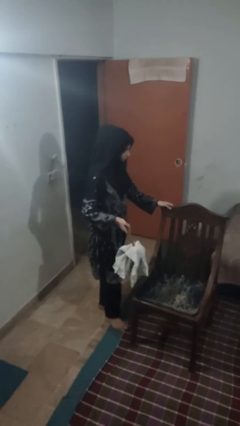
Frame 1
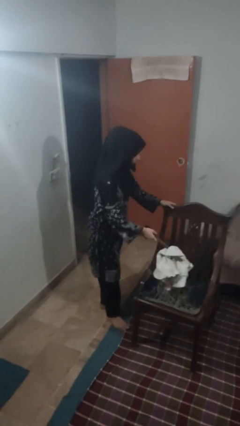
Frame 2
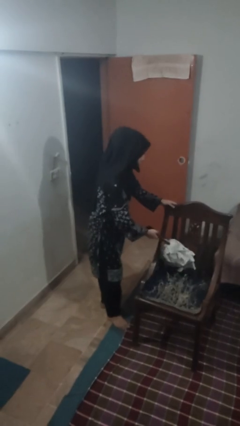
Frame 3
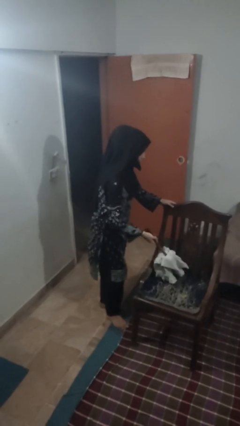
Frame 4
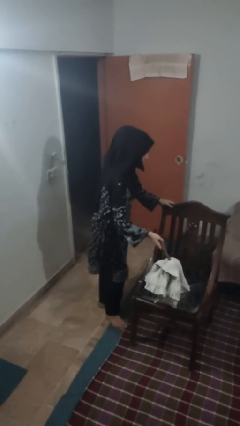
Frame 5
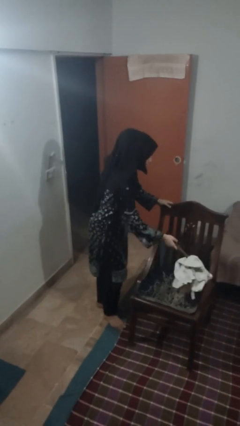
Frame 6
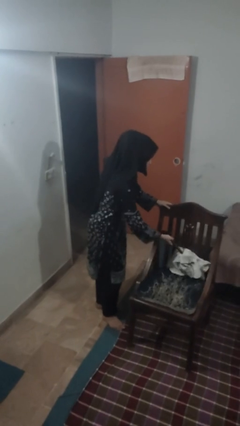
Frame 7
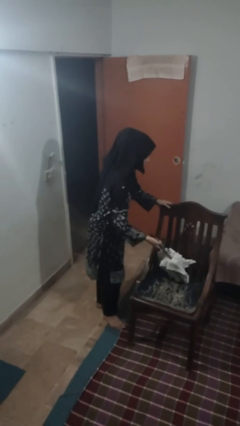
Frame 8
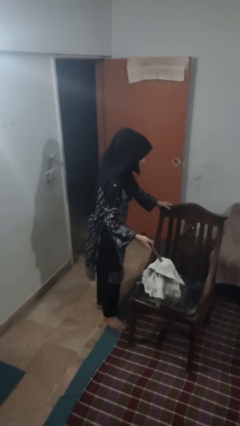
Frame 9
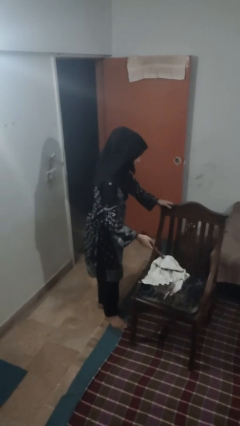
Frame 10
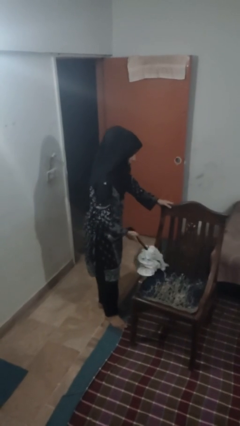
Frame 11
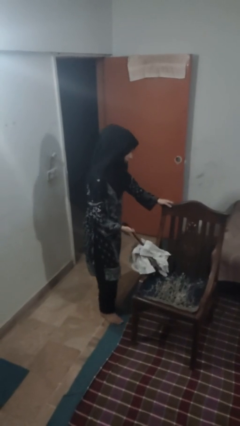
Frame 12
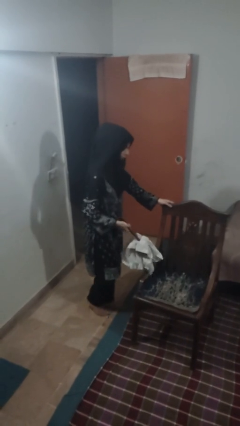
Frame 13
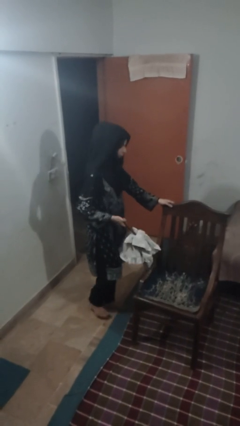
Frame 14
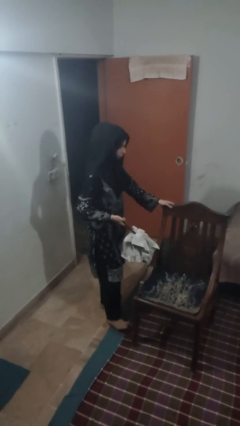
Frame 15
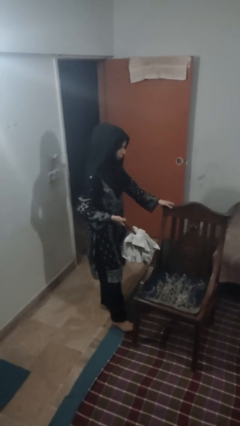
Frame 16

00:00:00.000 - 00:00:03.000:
person dusts furniture

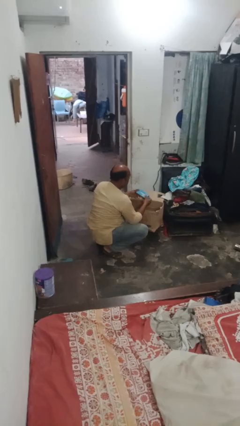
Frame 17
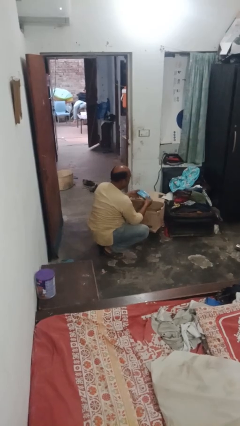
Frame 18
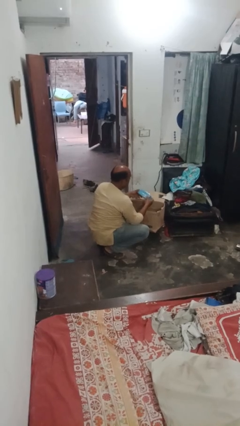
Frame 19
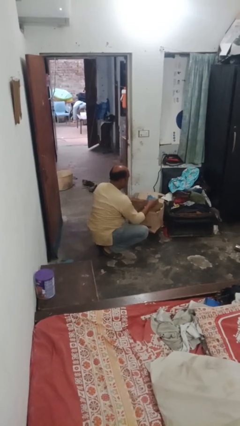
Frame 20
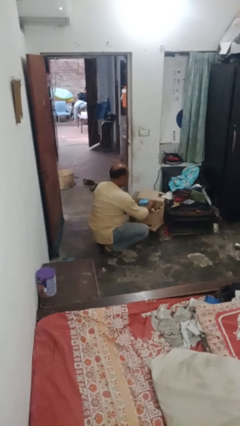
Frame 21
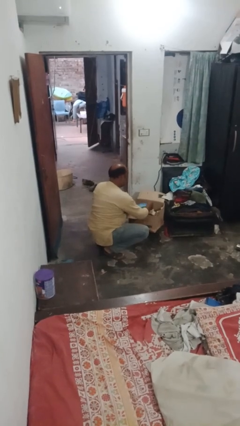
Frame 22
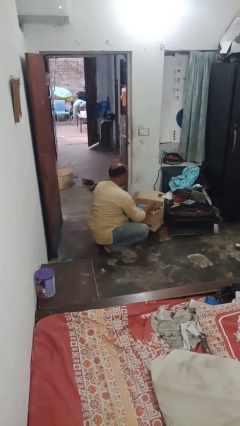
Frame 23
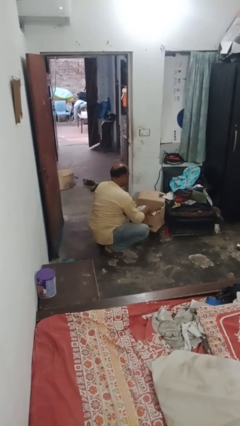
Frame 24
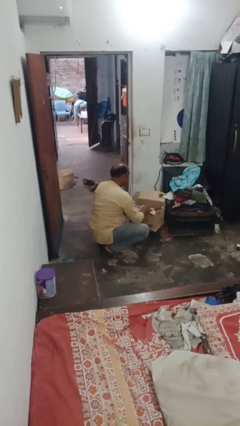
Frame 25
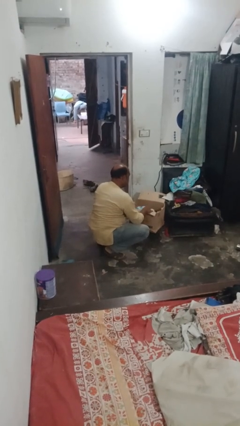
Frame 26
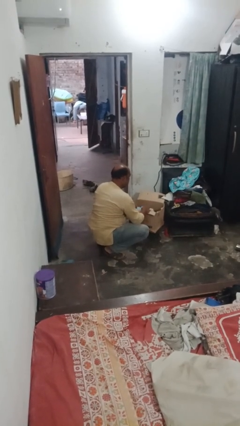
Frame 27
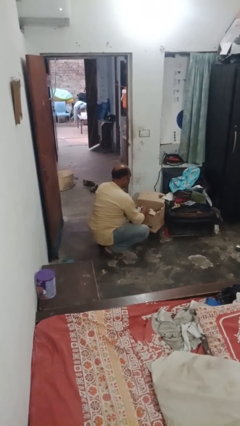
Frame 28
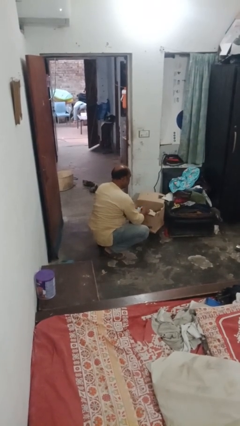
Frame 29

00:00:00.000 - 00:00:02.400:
person puts object into box

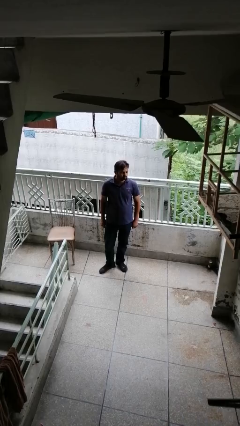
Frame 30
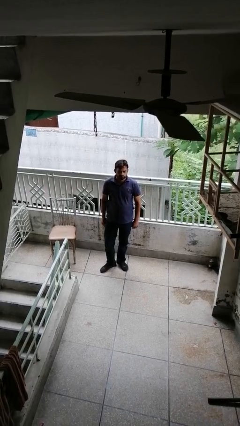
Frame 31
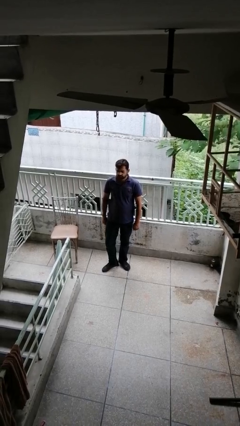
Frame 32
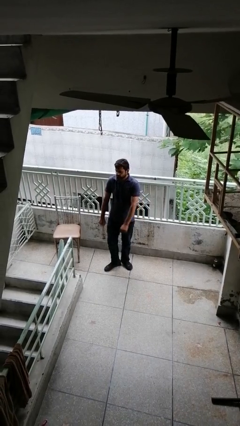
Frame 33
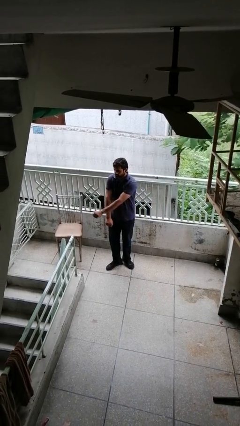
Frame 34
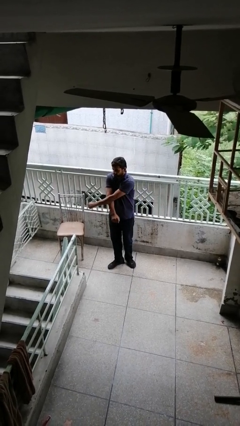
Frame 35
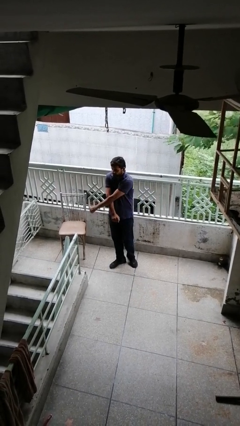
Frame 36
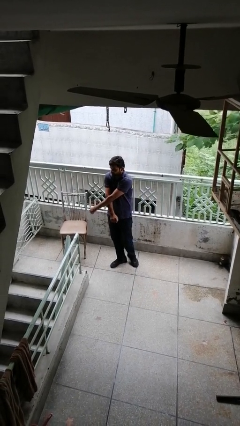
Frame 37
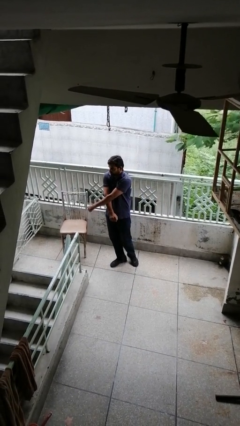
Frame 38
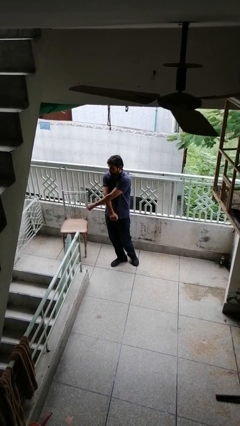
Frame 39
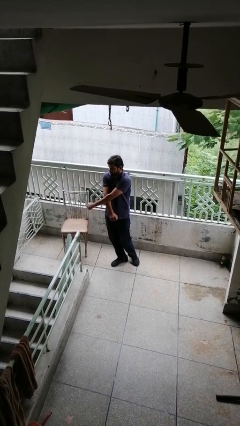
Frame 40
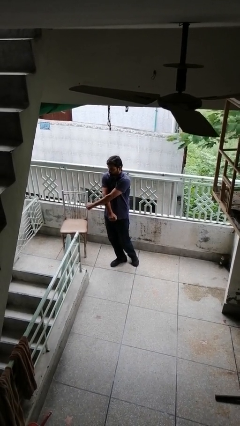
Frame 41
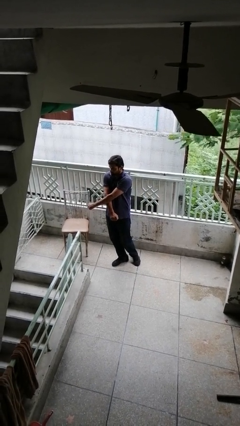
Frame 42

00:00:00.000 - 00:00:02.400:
person gestures arms x

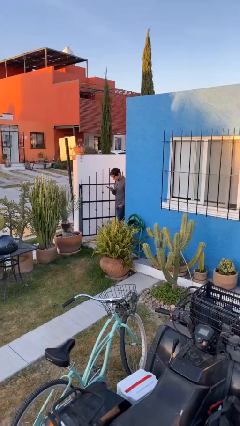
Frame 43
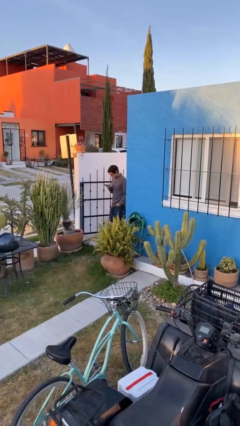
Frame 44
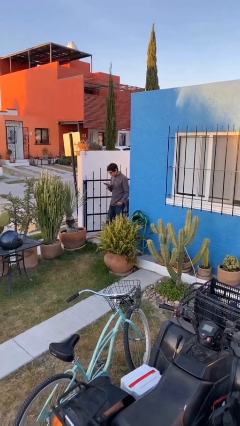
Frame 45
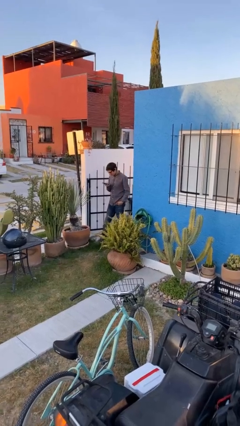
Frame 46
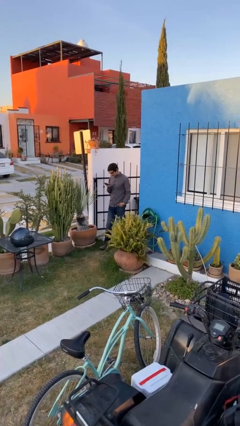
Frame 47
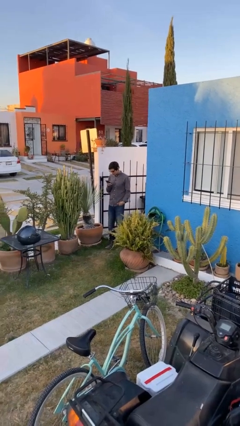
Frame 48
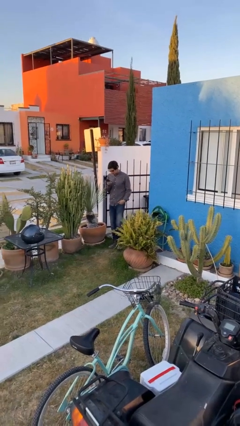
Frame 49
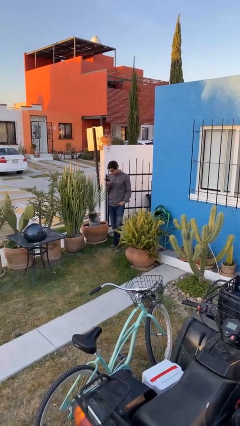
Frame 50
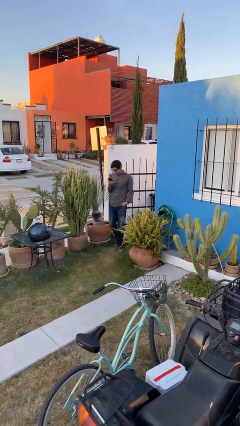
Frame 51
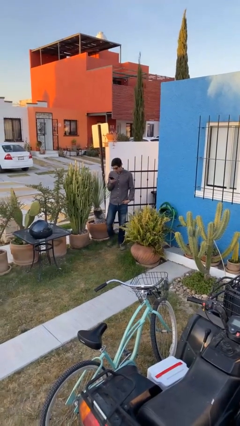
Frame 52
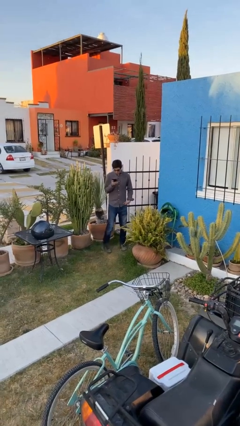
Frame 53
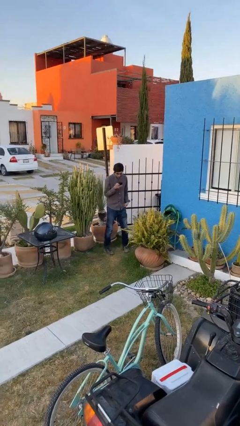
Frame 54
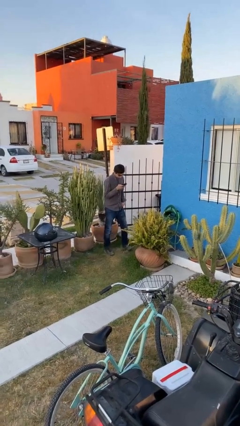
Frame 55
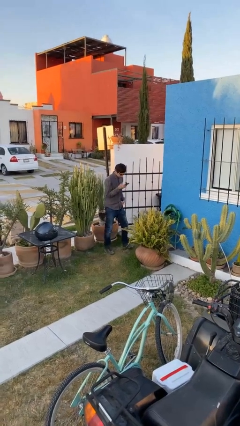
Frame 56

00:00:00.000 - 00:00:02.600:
person enters scene through structure

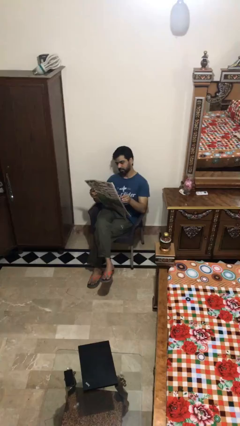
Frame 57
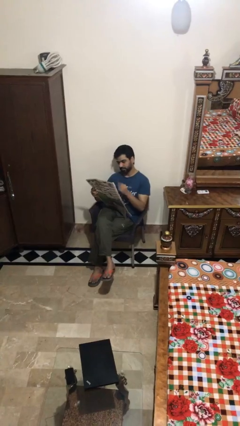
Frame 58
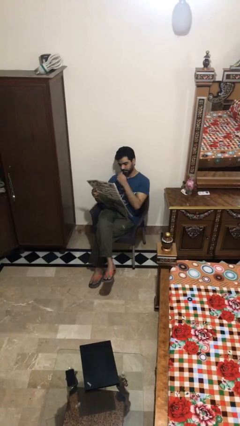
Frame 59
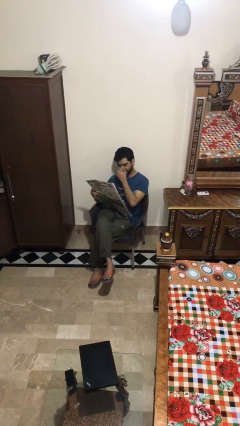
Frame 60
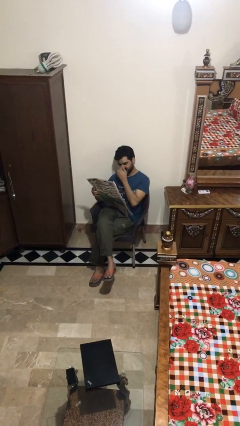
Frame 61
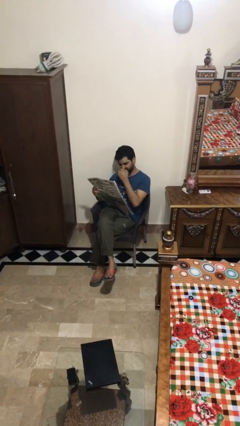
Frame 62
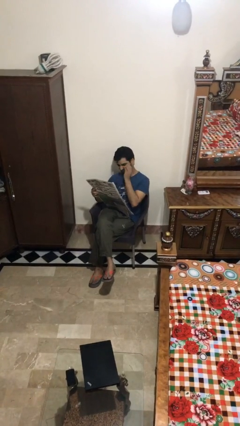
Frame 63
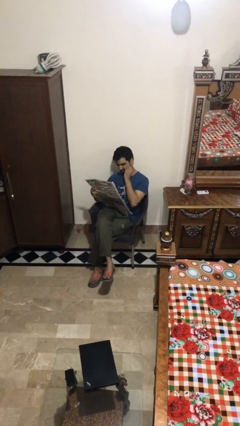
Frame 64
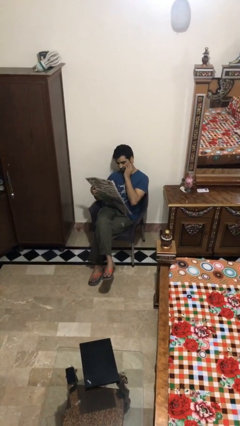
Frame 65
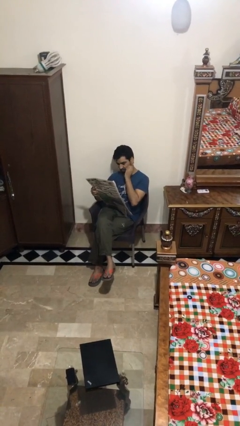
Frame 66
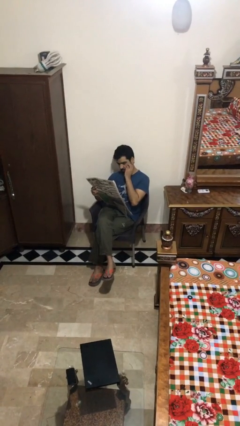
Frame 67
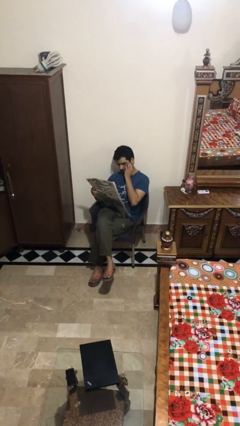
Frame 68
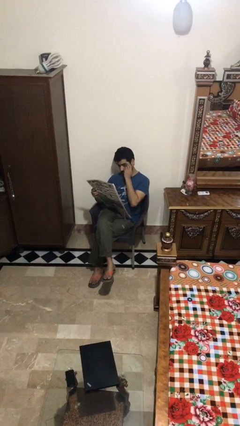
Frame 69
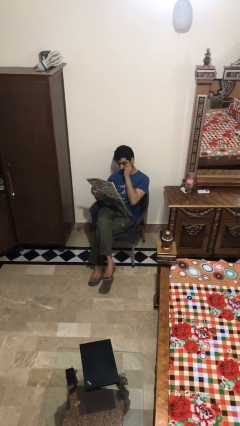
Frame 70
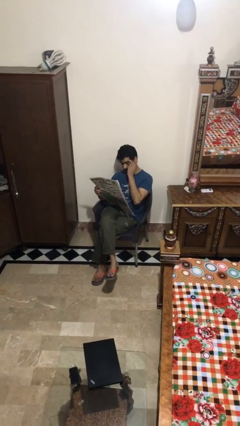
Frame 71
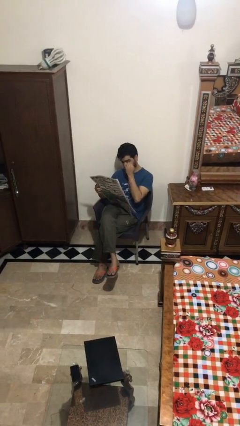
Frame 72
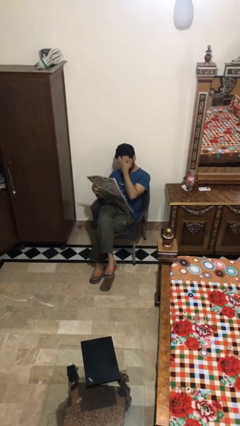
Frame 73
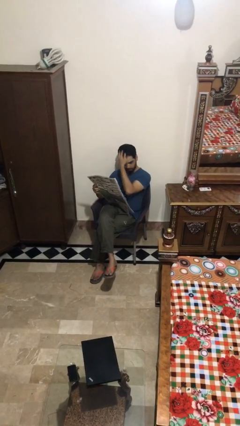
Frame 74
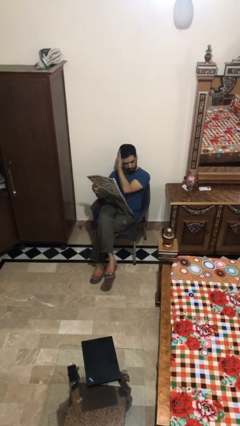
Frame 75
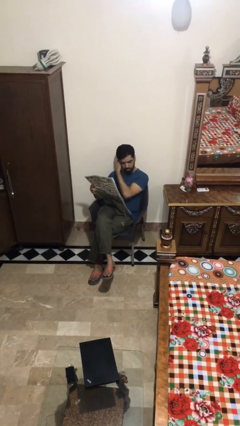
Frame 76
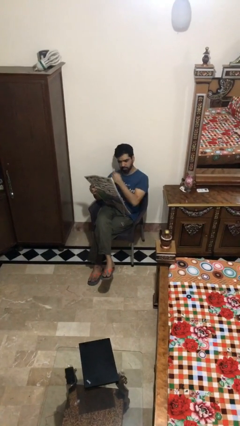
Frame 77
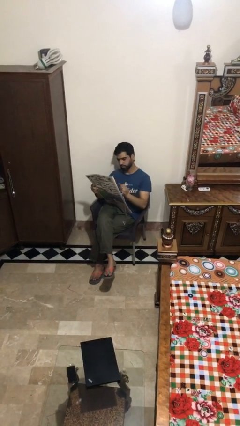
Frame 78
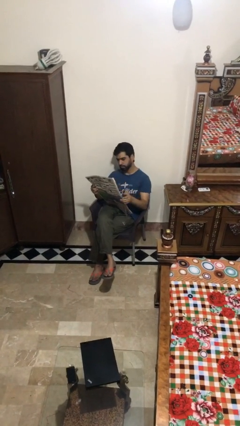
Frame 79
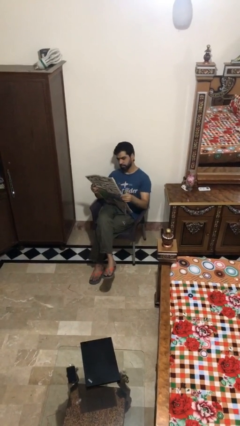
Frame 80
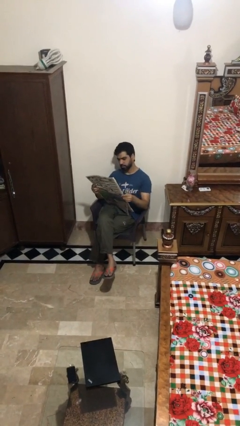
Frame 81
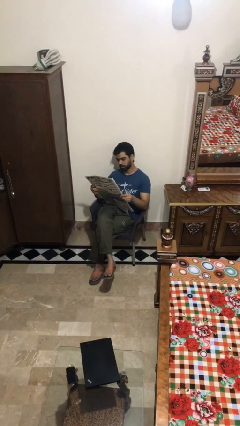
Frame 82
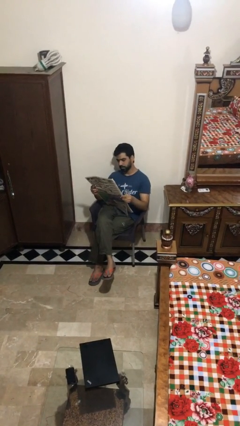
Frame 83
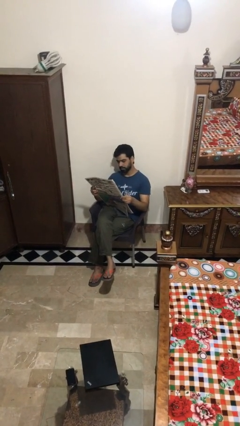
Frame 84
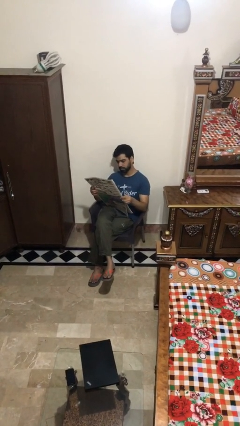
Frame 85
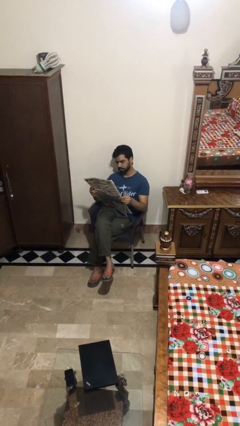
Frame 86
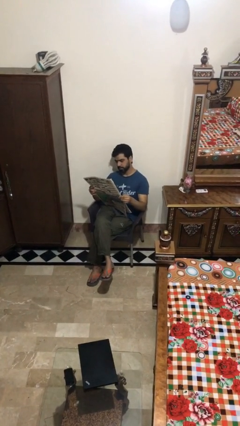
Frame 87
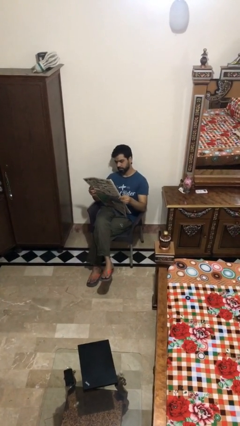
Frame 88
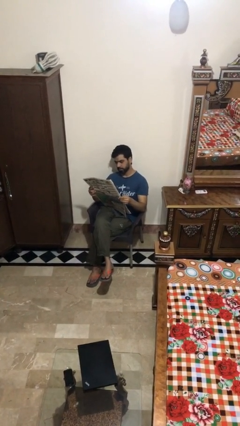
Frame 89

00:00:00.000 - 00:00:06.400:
person reads document

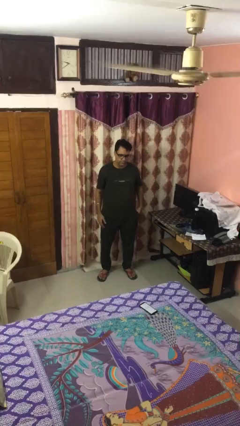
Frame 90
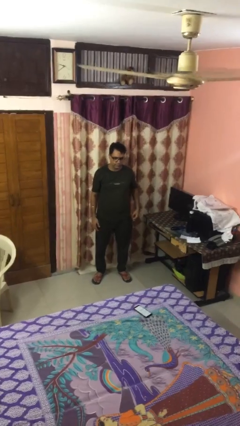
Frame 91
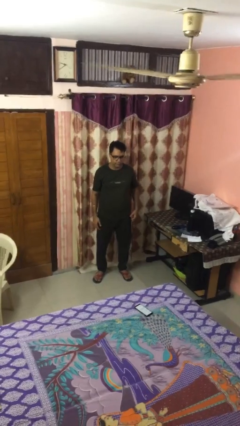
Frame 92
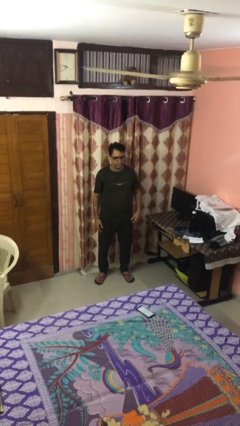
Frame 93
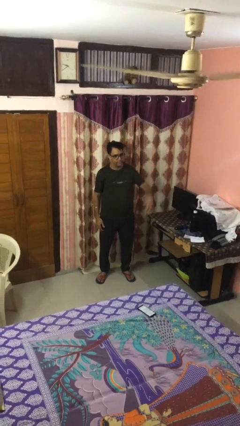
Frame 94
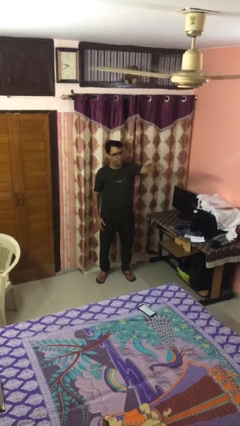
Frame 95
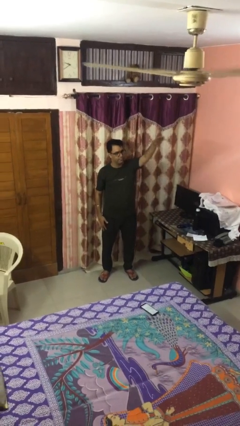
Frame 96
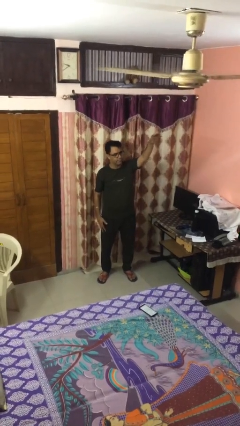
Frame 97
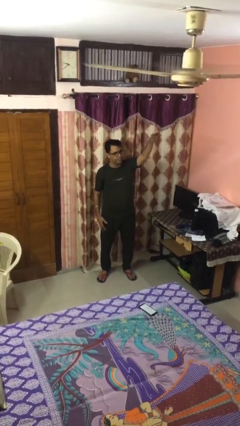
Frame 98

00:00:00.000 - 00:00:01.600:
person gestures swipe up
